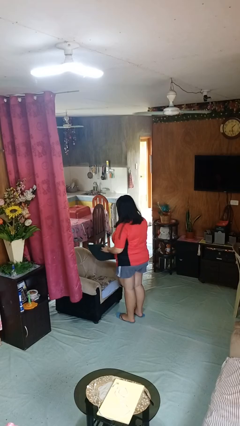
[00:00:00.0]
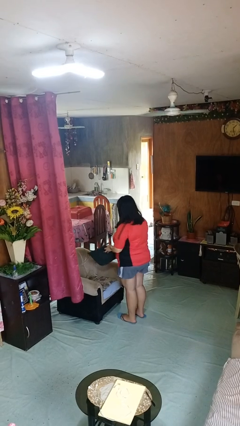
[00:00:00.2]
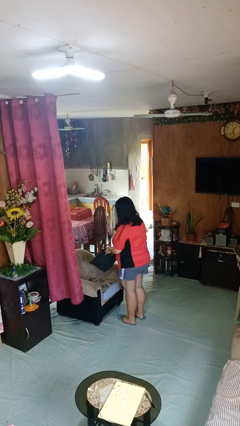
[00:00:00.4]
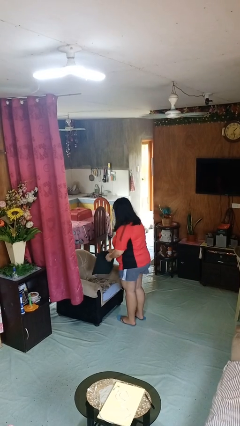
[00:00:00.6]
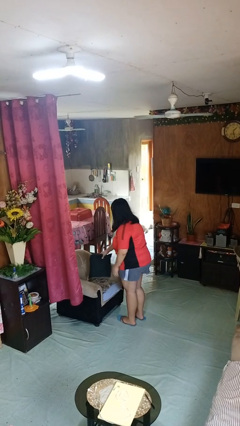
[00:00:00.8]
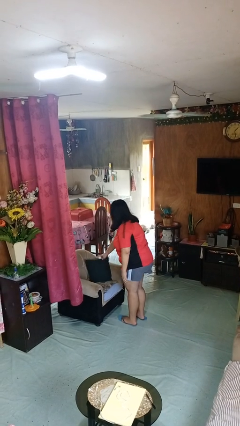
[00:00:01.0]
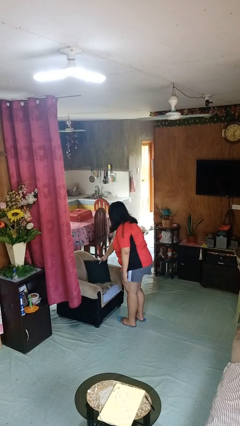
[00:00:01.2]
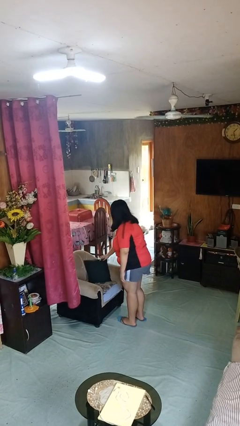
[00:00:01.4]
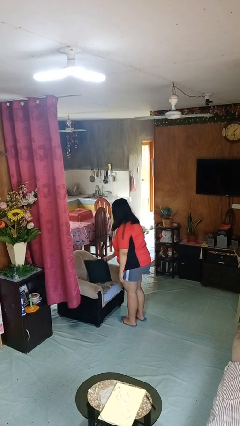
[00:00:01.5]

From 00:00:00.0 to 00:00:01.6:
person puts down object on couch

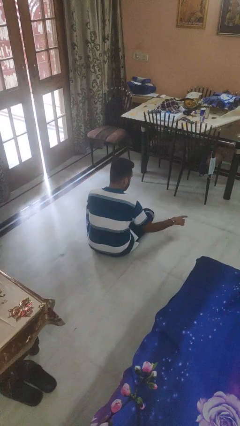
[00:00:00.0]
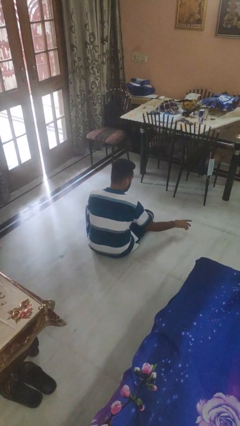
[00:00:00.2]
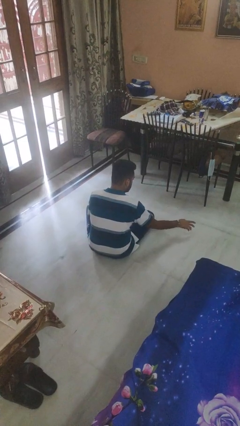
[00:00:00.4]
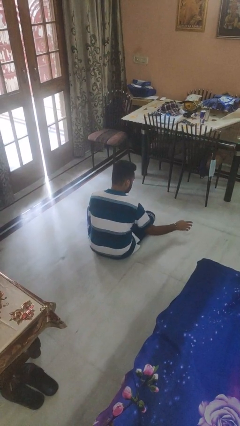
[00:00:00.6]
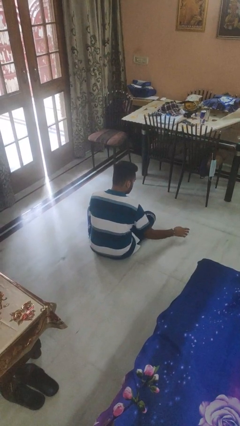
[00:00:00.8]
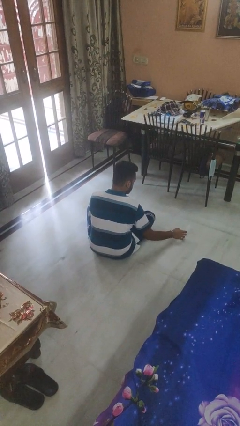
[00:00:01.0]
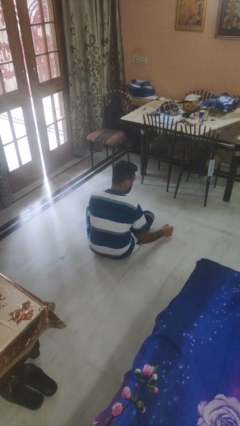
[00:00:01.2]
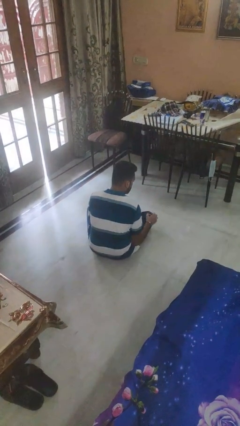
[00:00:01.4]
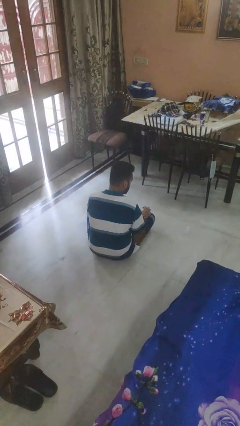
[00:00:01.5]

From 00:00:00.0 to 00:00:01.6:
person spills on floor

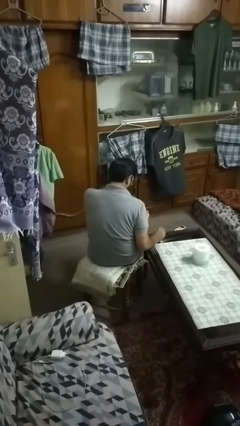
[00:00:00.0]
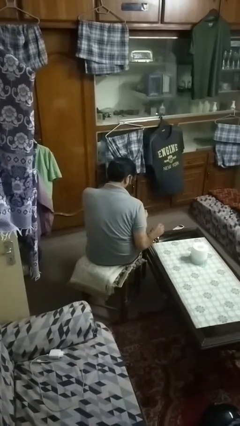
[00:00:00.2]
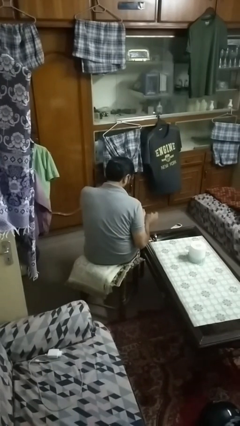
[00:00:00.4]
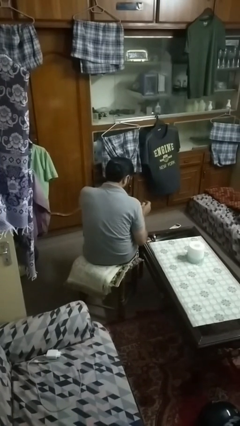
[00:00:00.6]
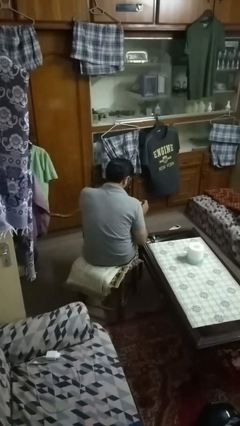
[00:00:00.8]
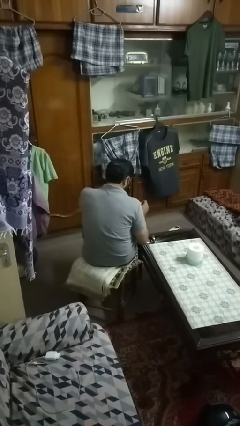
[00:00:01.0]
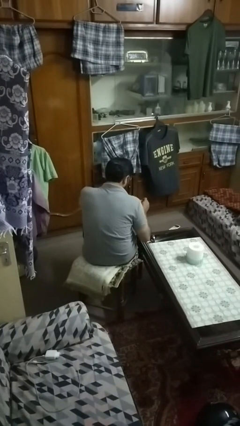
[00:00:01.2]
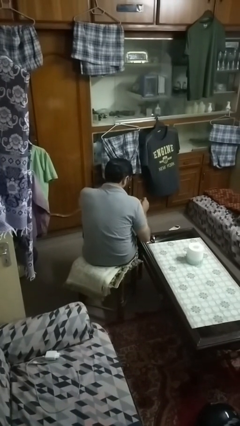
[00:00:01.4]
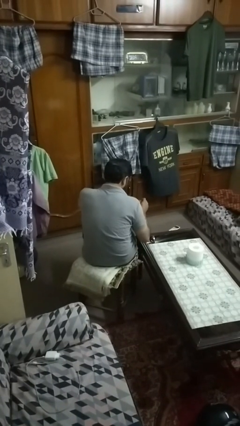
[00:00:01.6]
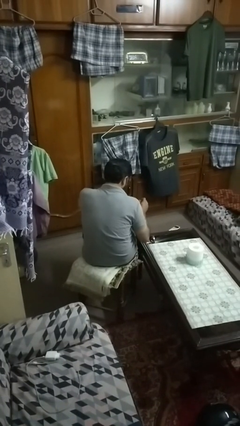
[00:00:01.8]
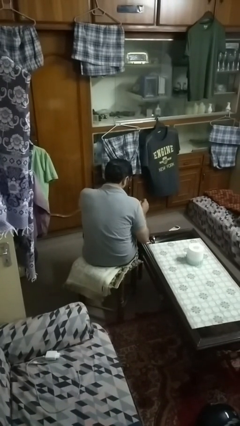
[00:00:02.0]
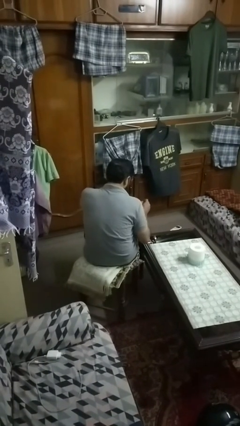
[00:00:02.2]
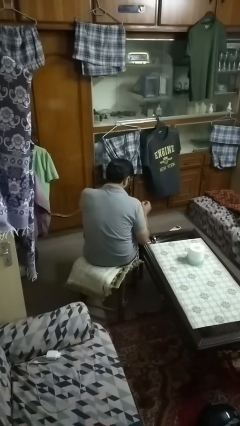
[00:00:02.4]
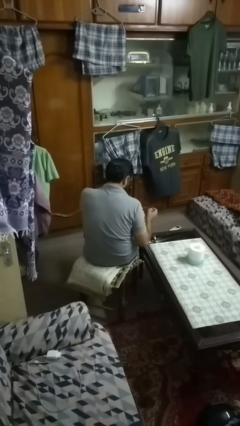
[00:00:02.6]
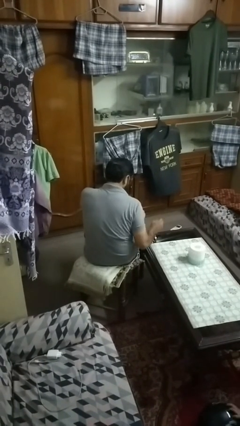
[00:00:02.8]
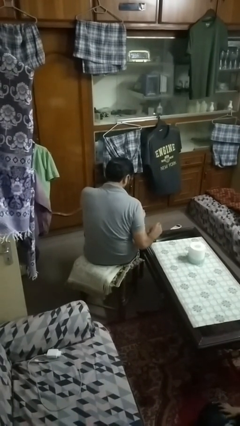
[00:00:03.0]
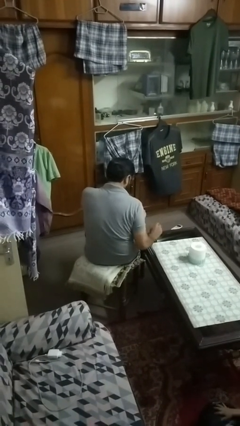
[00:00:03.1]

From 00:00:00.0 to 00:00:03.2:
person paints fingernails

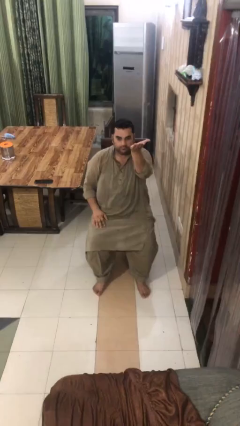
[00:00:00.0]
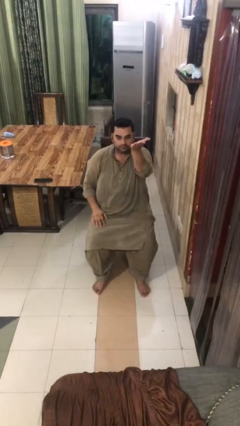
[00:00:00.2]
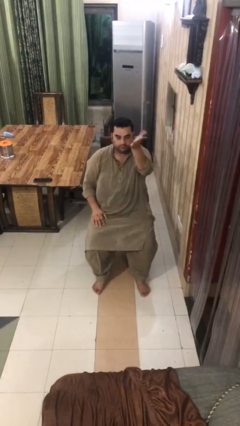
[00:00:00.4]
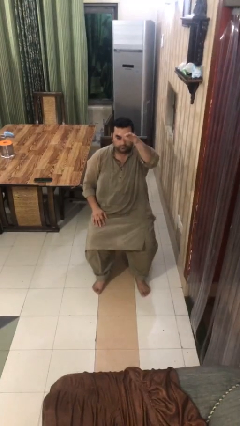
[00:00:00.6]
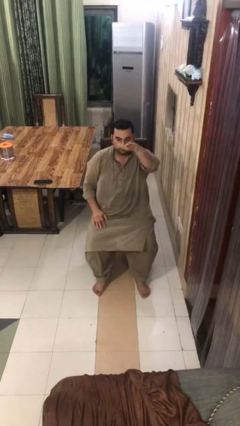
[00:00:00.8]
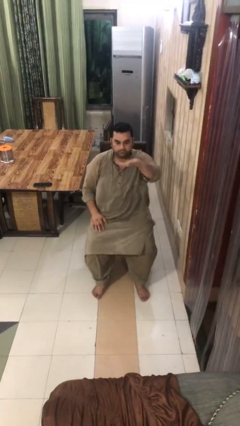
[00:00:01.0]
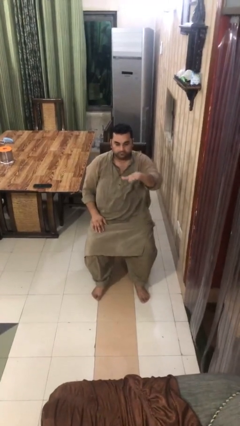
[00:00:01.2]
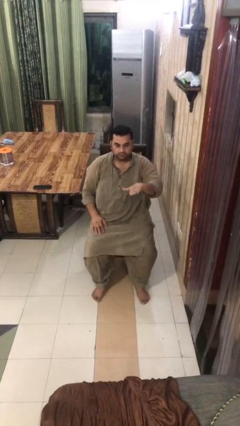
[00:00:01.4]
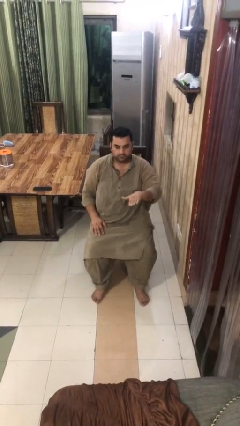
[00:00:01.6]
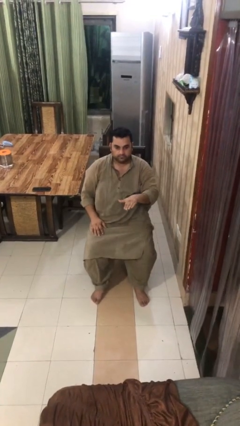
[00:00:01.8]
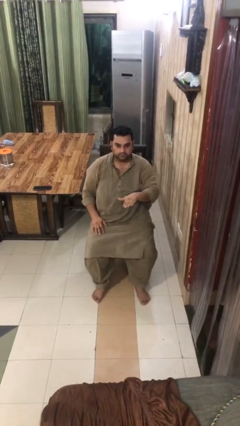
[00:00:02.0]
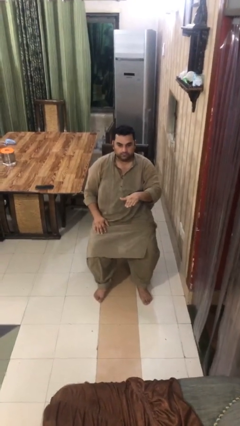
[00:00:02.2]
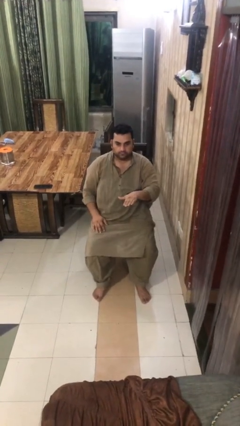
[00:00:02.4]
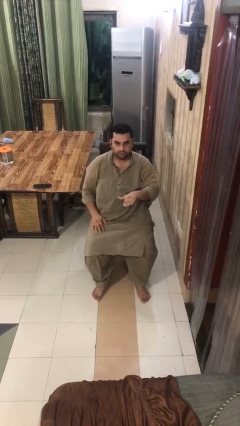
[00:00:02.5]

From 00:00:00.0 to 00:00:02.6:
person gestures swipe down

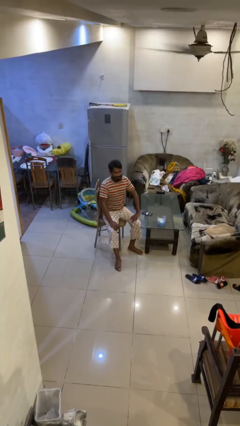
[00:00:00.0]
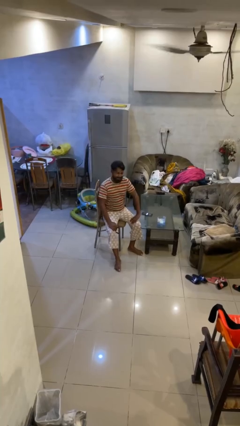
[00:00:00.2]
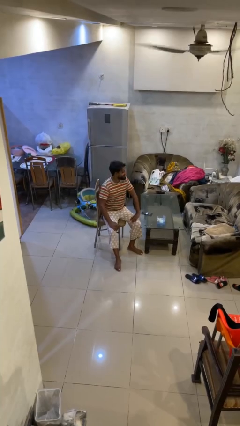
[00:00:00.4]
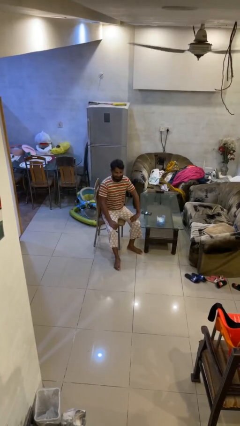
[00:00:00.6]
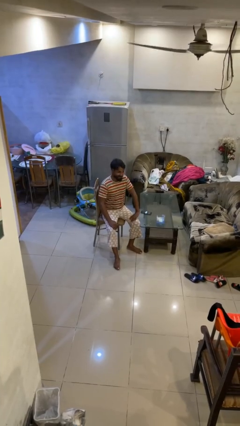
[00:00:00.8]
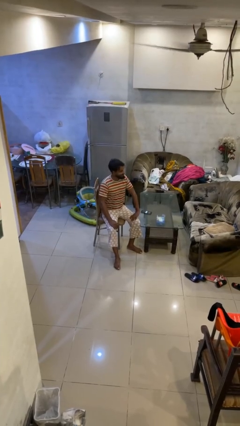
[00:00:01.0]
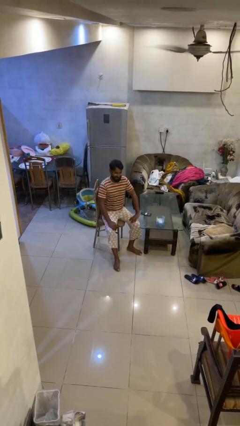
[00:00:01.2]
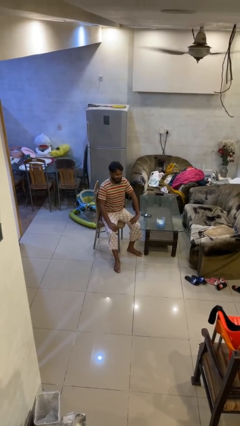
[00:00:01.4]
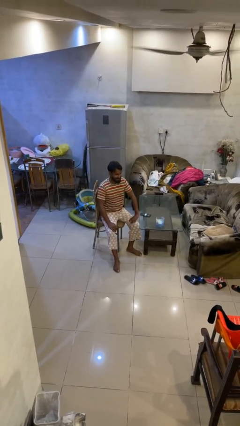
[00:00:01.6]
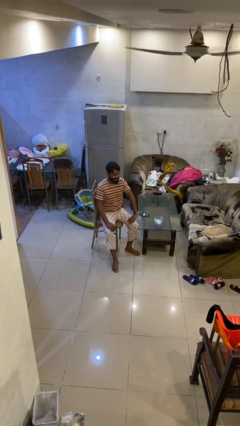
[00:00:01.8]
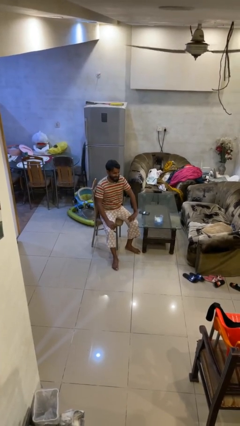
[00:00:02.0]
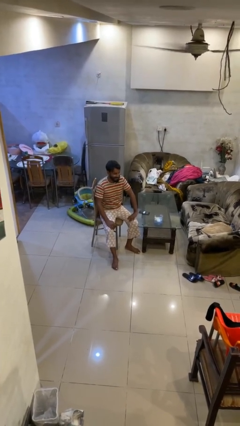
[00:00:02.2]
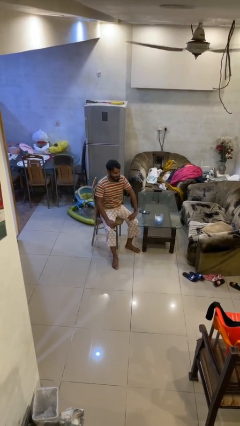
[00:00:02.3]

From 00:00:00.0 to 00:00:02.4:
person shakes head

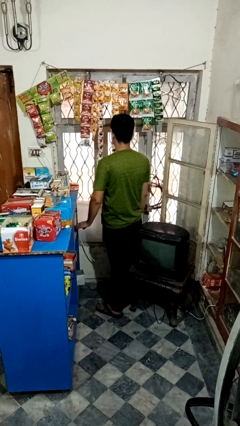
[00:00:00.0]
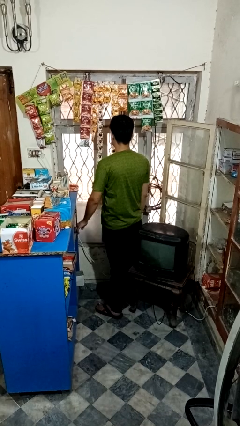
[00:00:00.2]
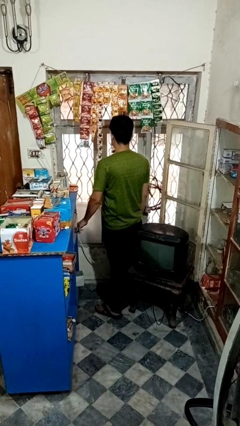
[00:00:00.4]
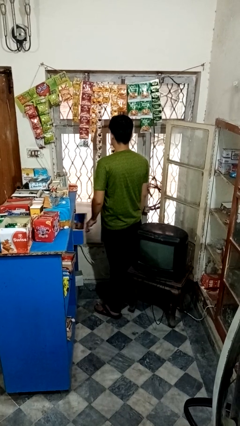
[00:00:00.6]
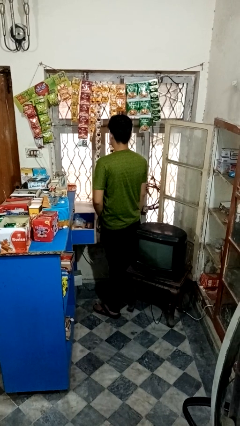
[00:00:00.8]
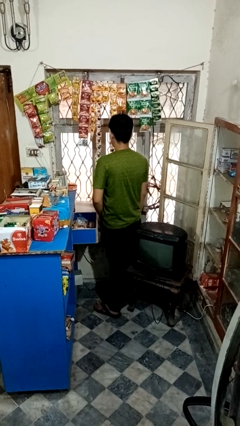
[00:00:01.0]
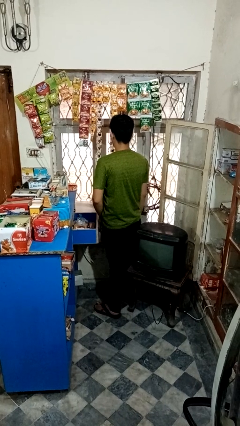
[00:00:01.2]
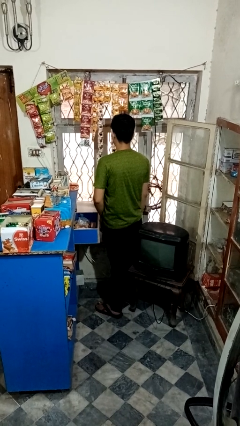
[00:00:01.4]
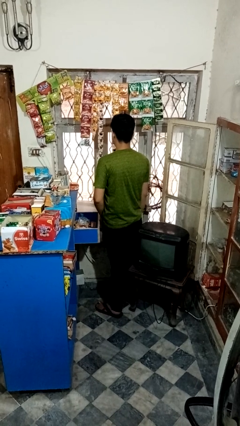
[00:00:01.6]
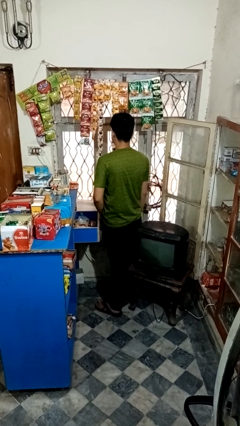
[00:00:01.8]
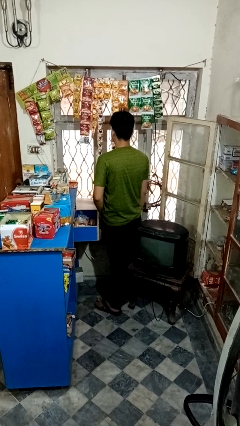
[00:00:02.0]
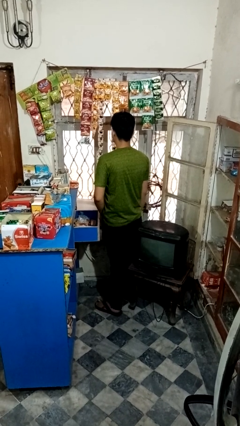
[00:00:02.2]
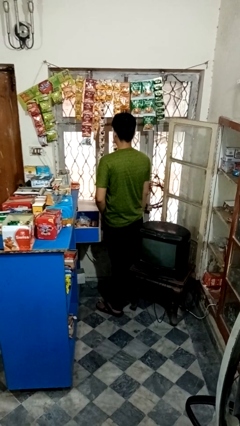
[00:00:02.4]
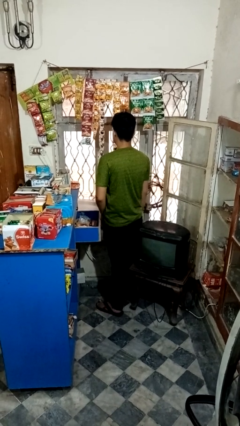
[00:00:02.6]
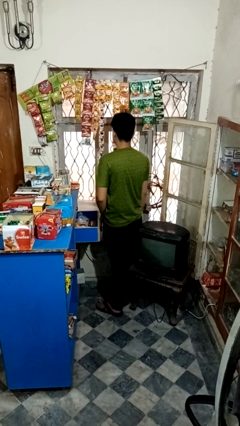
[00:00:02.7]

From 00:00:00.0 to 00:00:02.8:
person opens kitchen drawer

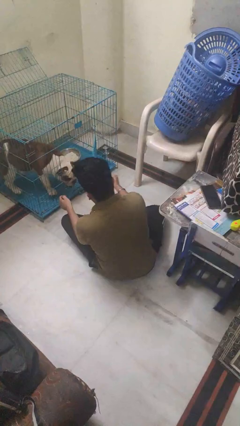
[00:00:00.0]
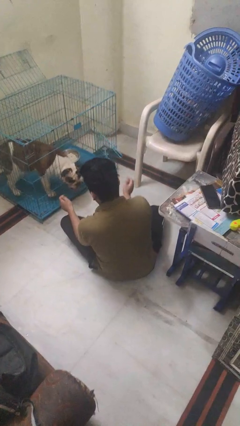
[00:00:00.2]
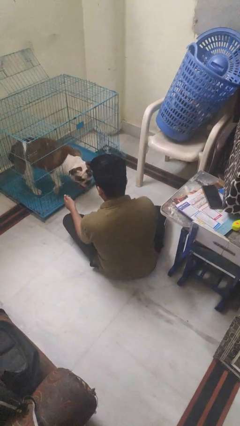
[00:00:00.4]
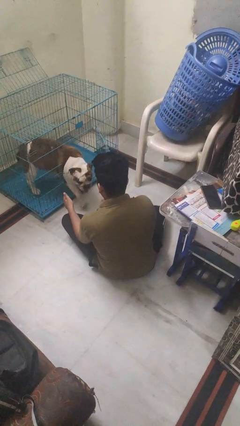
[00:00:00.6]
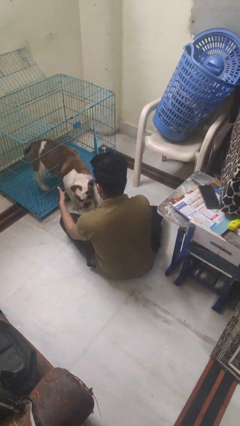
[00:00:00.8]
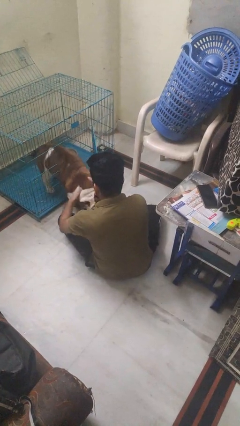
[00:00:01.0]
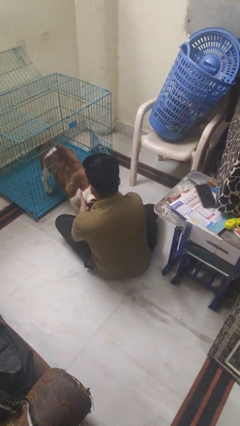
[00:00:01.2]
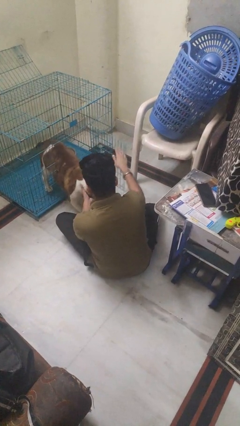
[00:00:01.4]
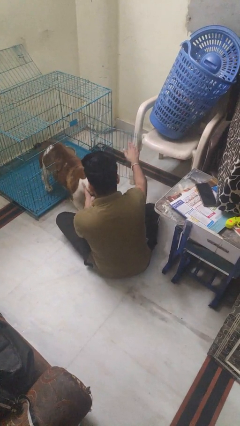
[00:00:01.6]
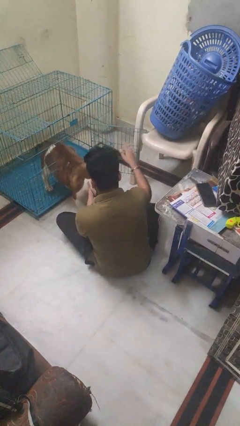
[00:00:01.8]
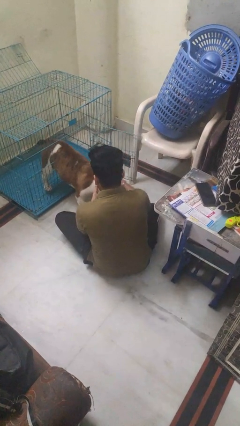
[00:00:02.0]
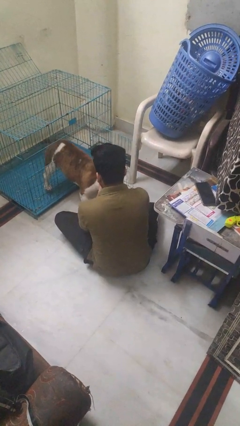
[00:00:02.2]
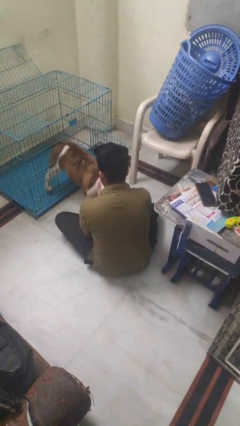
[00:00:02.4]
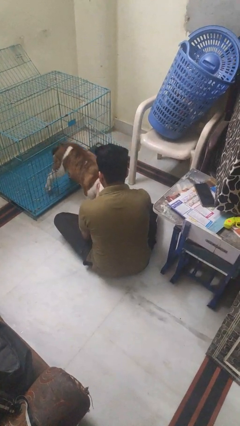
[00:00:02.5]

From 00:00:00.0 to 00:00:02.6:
person uncrates dog
